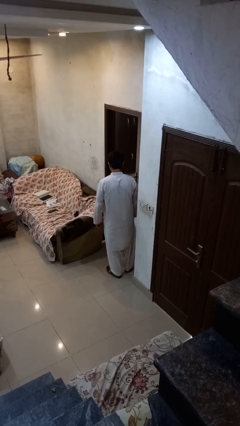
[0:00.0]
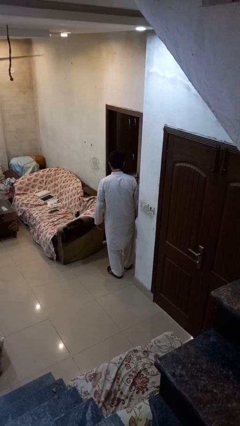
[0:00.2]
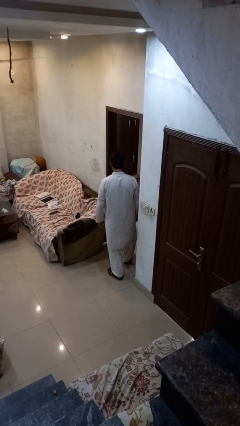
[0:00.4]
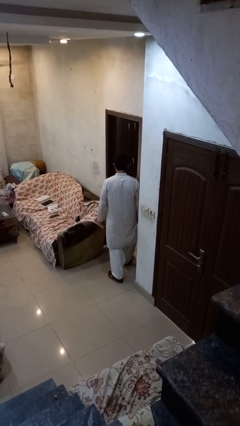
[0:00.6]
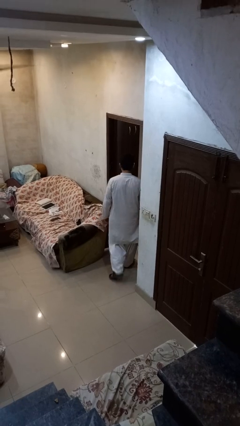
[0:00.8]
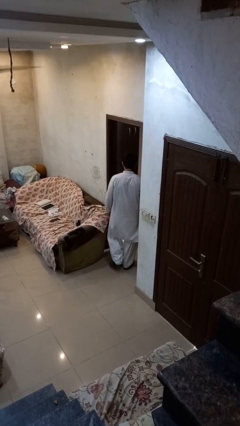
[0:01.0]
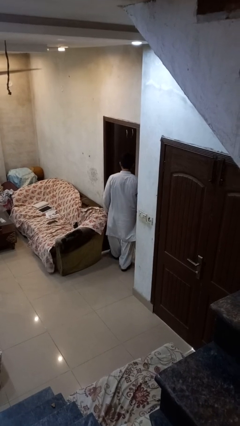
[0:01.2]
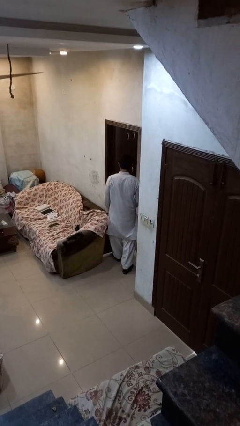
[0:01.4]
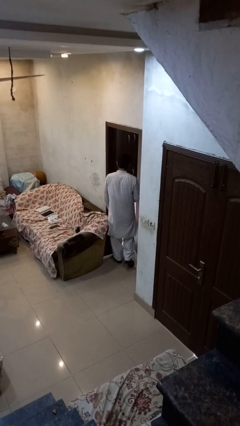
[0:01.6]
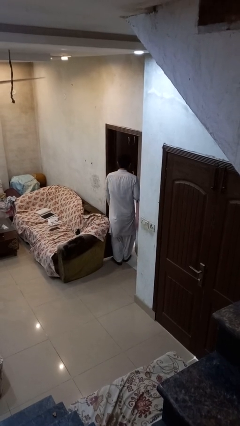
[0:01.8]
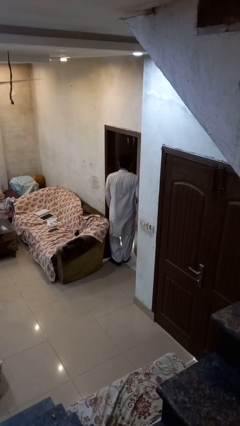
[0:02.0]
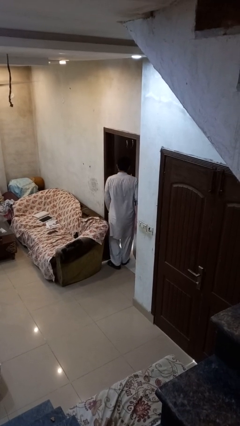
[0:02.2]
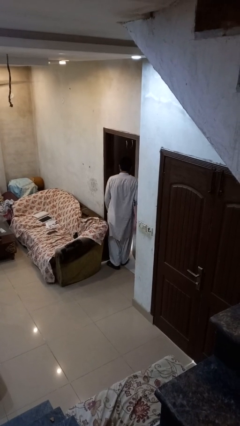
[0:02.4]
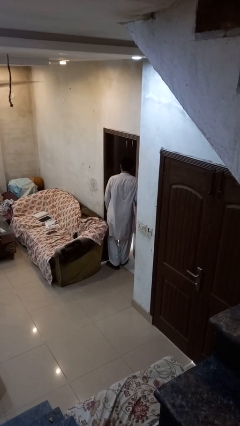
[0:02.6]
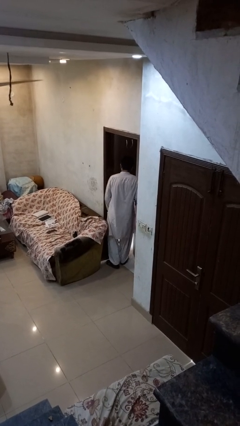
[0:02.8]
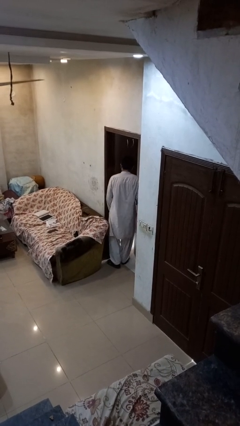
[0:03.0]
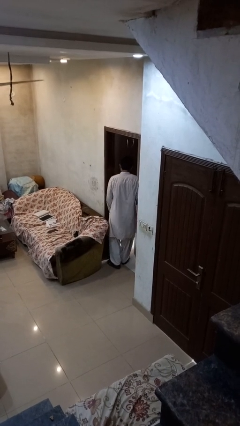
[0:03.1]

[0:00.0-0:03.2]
person bumps into wall

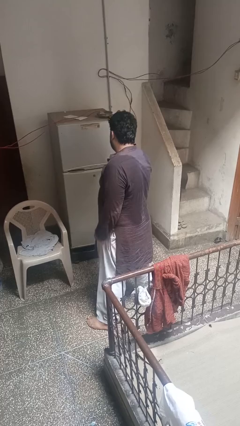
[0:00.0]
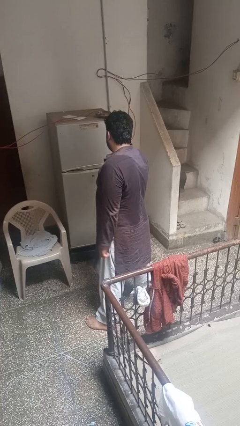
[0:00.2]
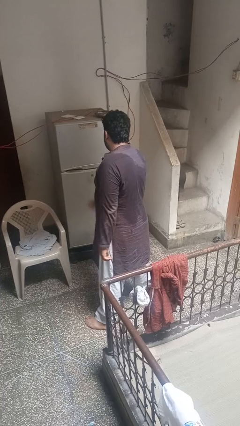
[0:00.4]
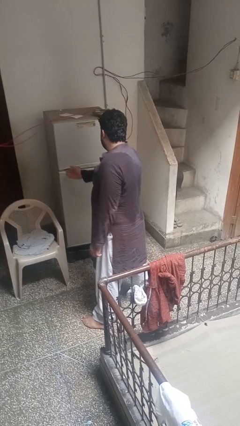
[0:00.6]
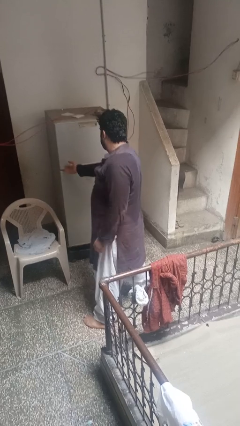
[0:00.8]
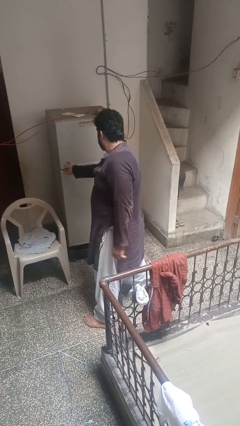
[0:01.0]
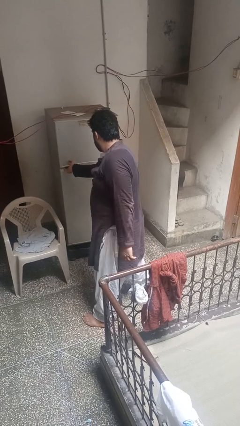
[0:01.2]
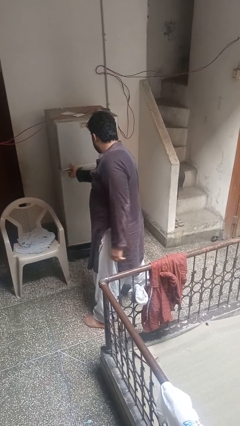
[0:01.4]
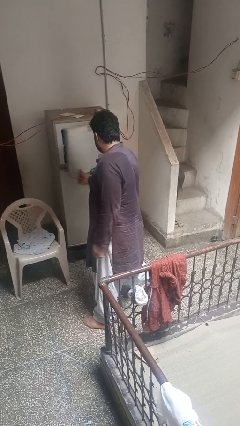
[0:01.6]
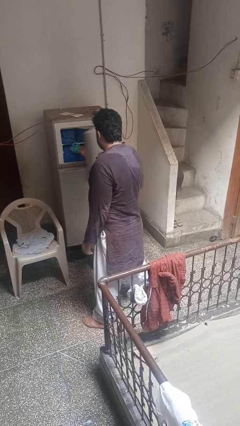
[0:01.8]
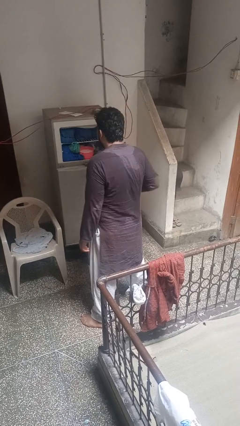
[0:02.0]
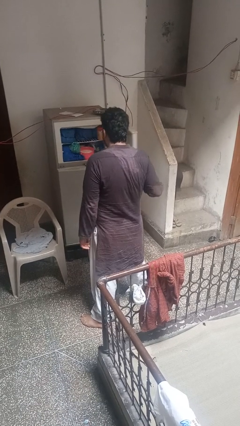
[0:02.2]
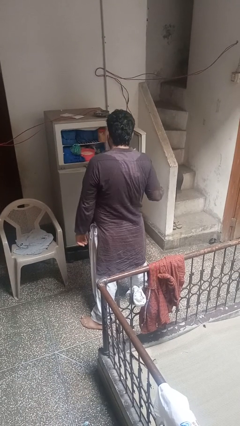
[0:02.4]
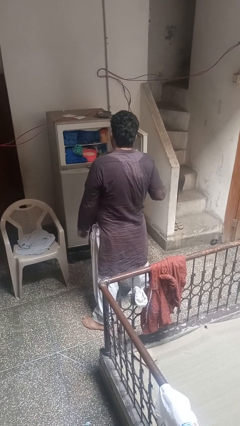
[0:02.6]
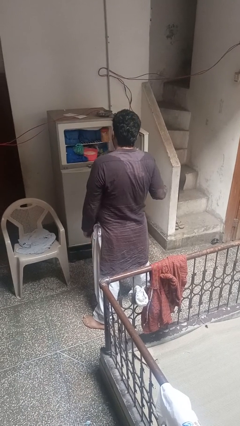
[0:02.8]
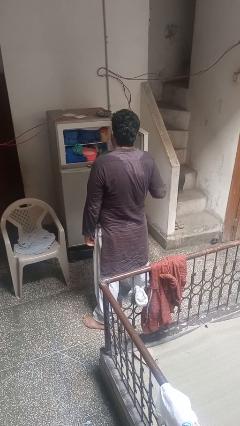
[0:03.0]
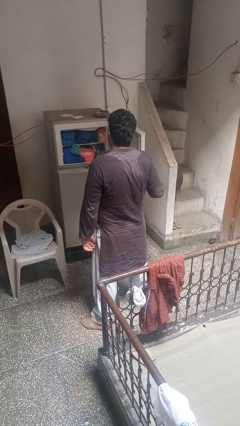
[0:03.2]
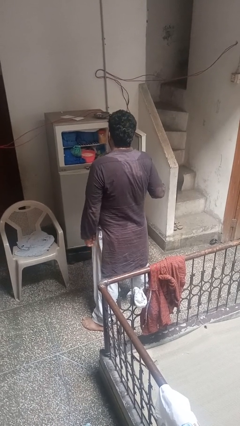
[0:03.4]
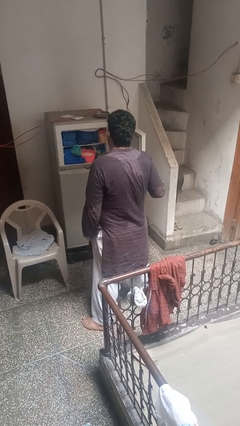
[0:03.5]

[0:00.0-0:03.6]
person opens refrigerator

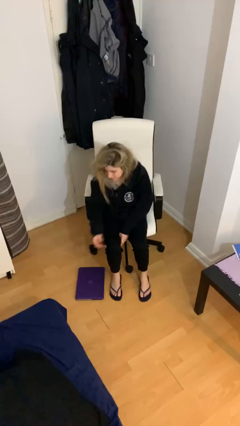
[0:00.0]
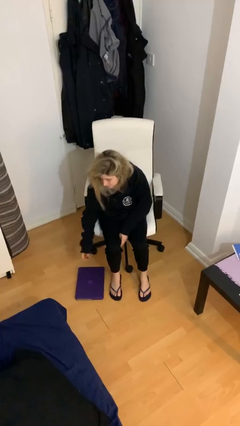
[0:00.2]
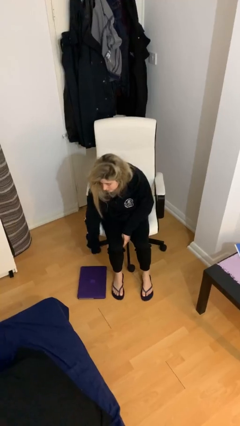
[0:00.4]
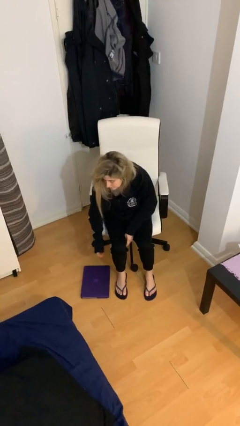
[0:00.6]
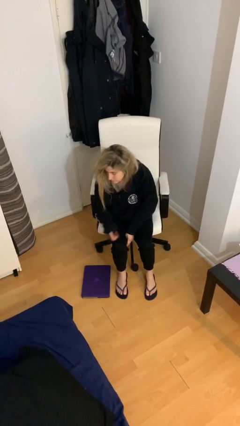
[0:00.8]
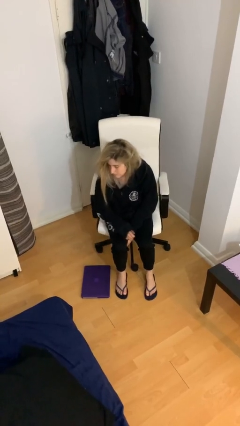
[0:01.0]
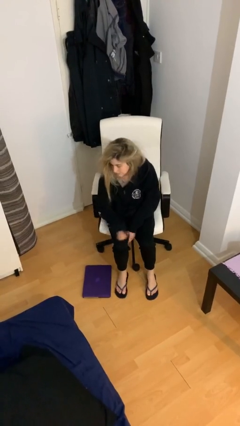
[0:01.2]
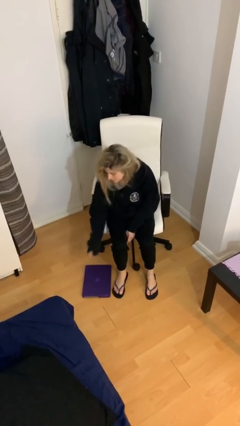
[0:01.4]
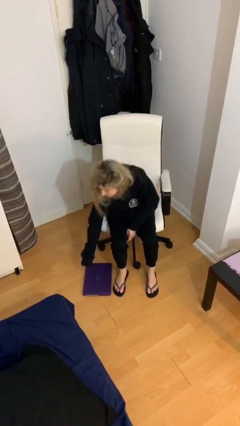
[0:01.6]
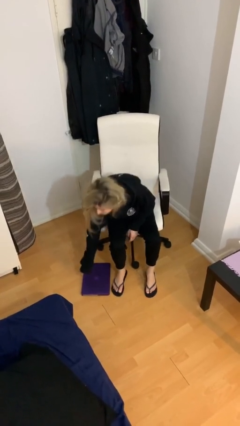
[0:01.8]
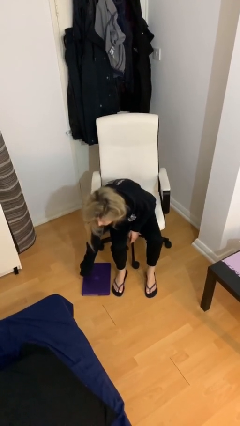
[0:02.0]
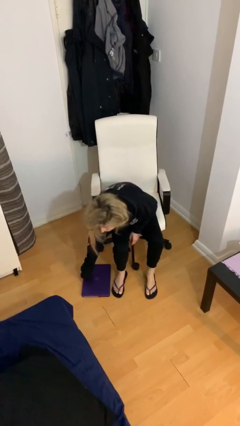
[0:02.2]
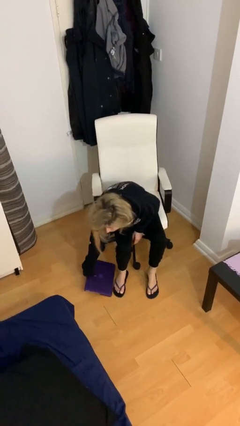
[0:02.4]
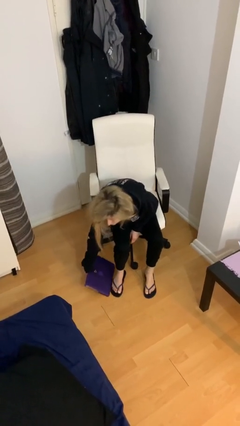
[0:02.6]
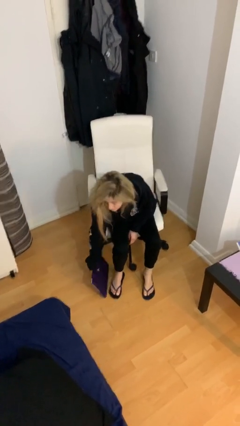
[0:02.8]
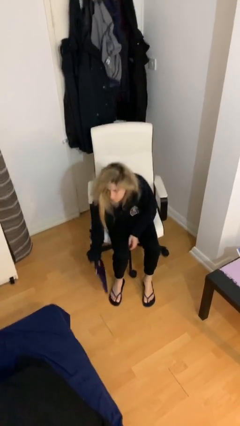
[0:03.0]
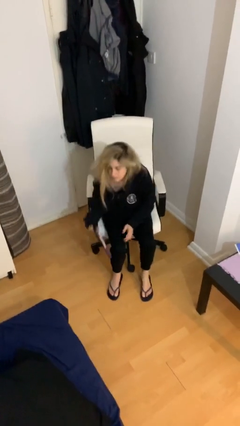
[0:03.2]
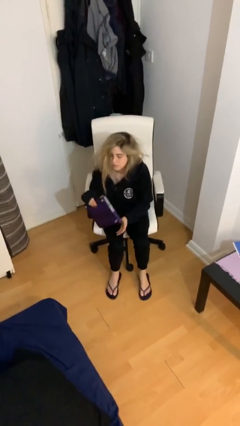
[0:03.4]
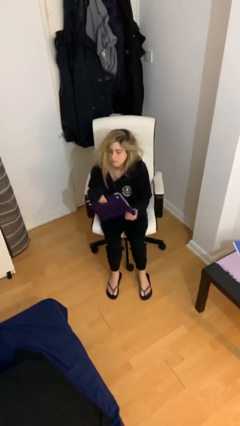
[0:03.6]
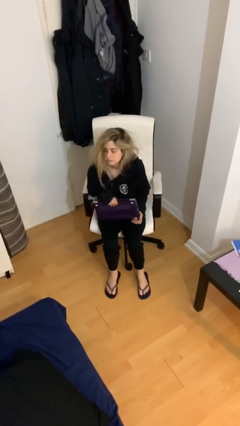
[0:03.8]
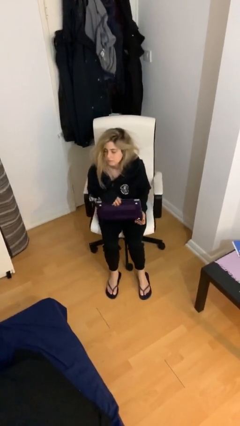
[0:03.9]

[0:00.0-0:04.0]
person picks up object from floor

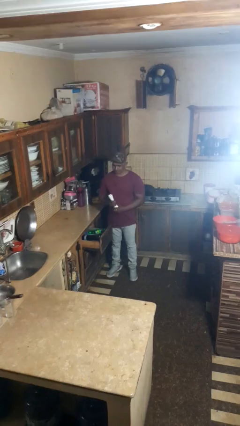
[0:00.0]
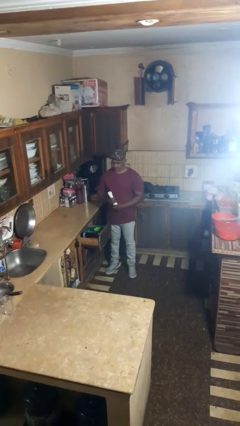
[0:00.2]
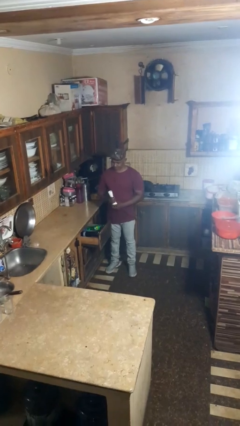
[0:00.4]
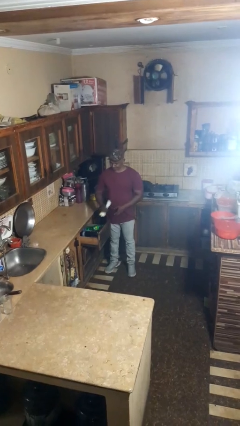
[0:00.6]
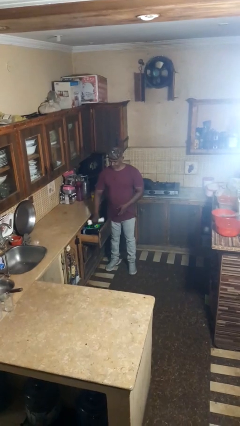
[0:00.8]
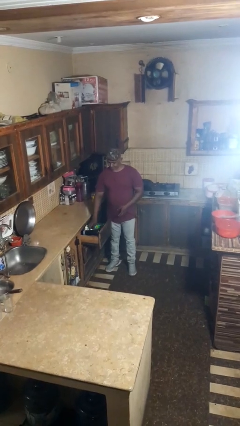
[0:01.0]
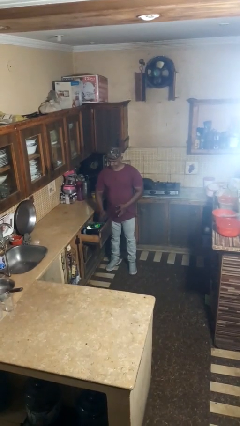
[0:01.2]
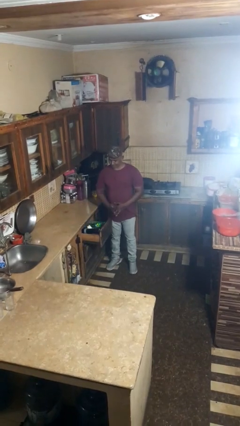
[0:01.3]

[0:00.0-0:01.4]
person puts object into kitchen drawer

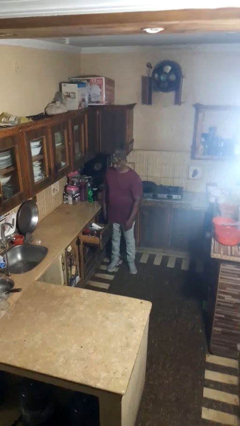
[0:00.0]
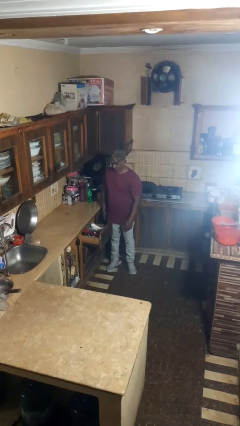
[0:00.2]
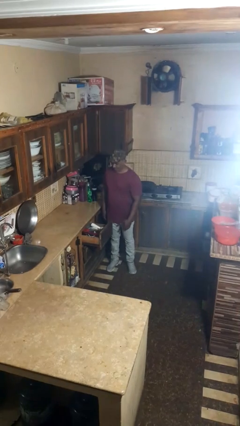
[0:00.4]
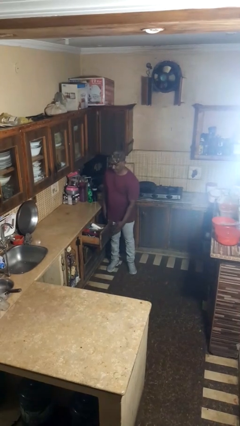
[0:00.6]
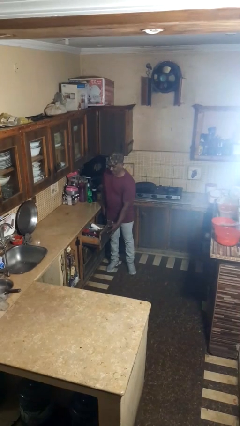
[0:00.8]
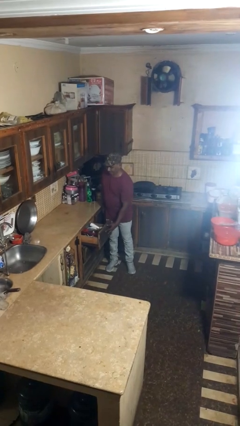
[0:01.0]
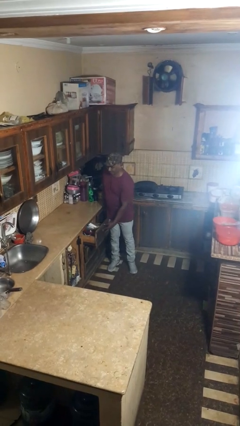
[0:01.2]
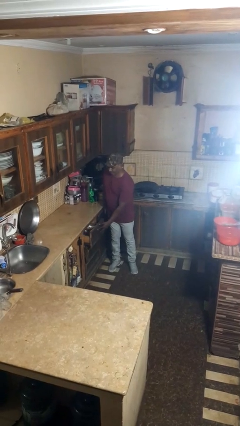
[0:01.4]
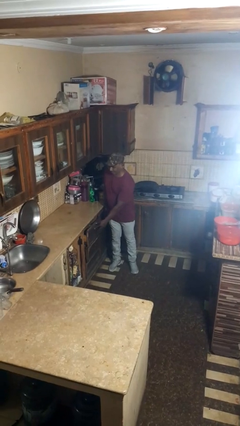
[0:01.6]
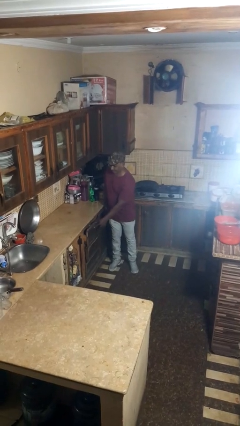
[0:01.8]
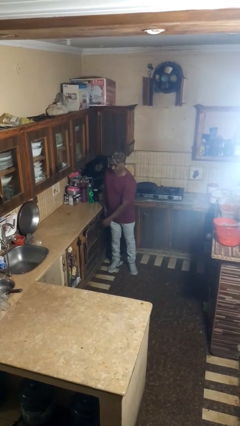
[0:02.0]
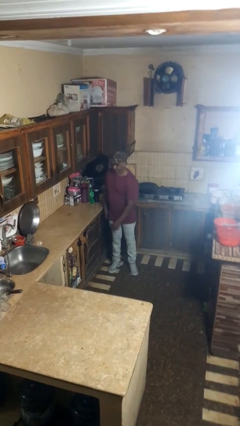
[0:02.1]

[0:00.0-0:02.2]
person closes kitchen drawer

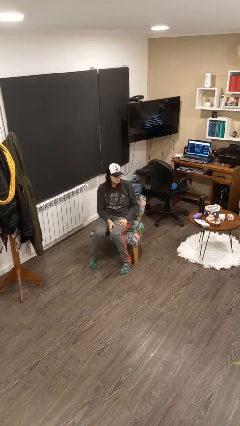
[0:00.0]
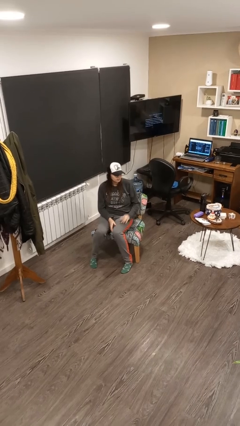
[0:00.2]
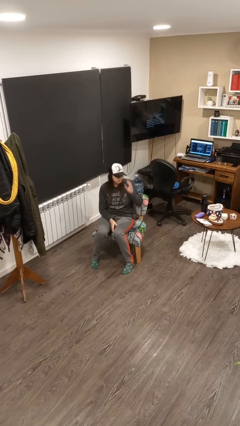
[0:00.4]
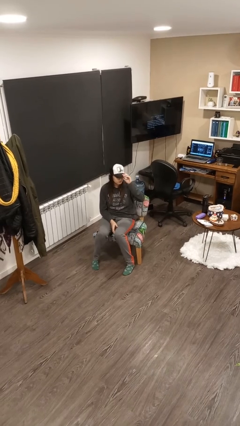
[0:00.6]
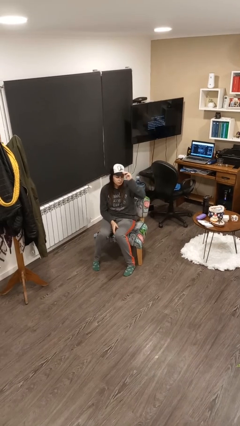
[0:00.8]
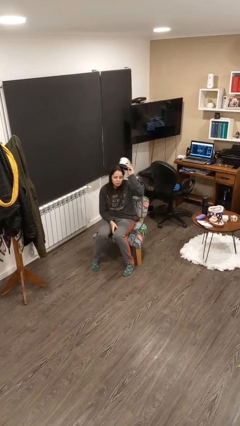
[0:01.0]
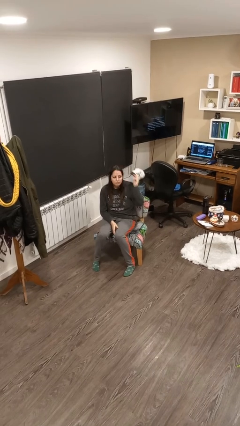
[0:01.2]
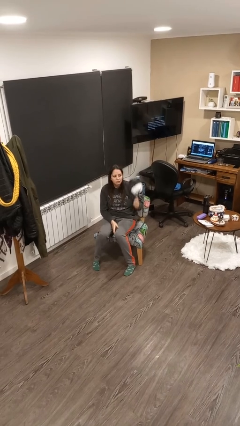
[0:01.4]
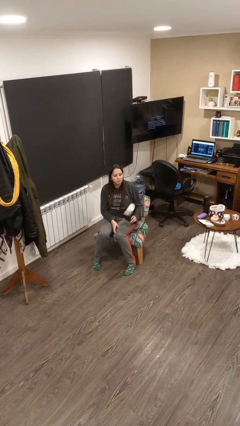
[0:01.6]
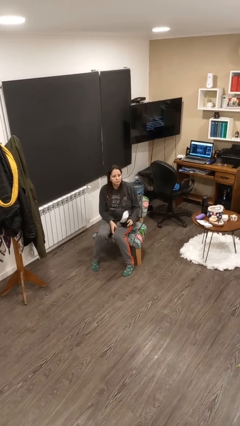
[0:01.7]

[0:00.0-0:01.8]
person takes off hat

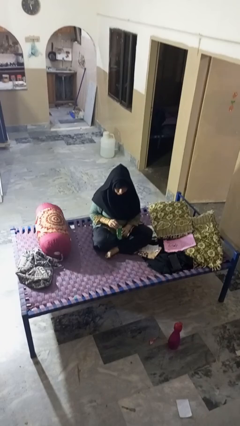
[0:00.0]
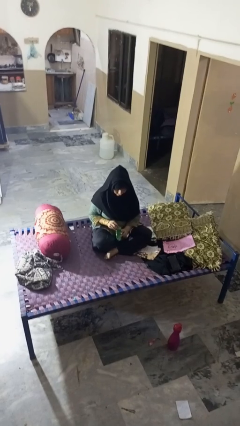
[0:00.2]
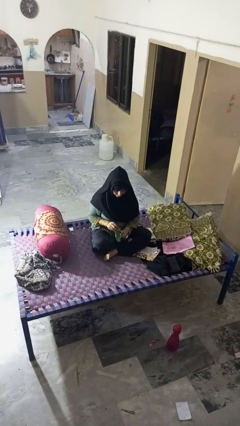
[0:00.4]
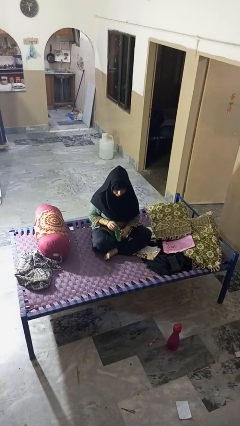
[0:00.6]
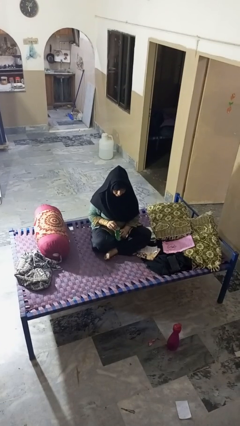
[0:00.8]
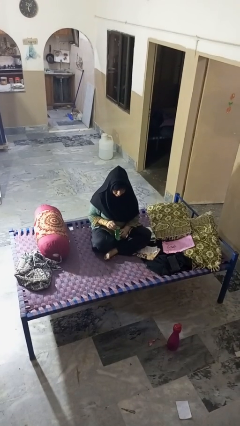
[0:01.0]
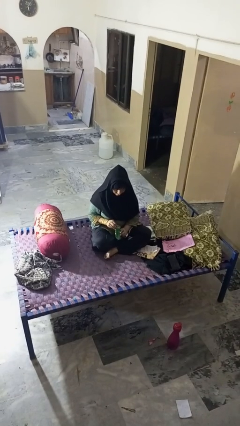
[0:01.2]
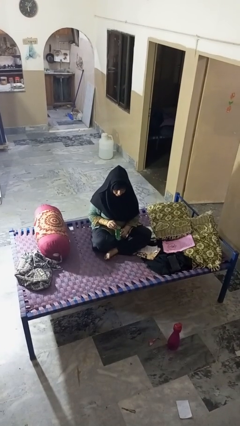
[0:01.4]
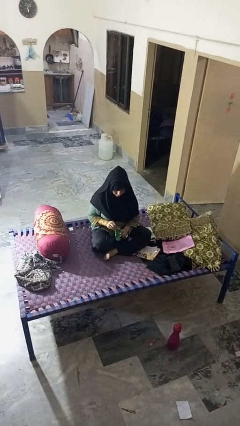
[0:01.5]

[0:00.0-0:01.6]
person opens can with can opener
